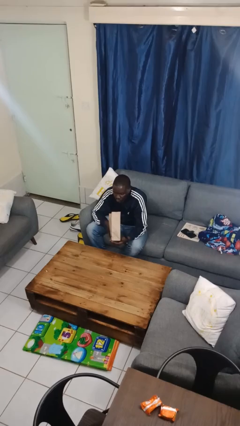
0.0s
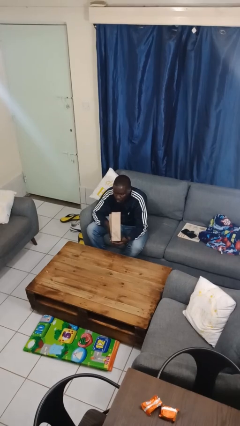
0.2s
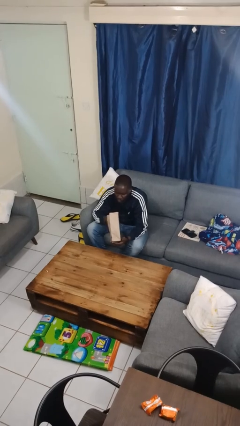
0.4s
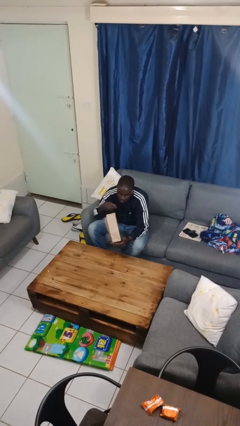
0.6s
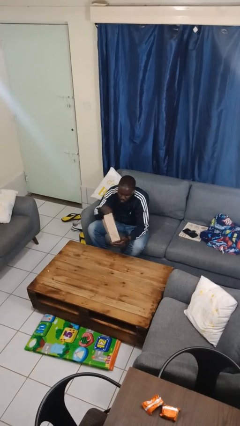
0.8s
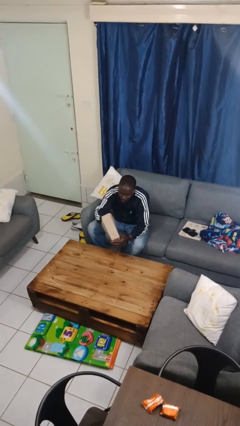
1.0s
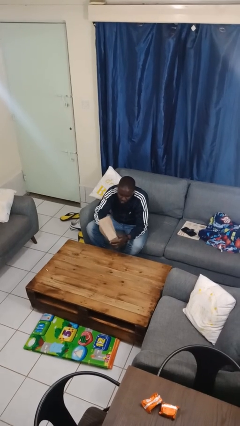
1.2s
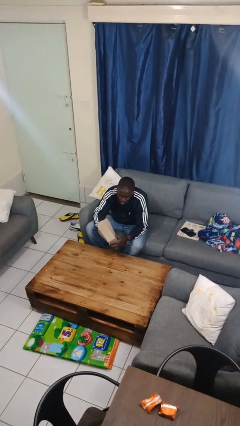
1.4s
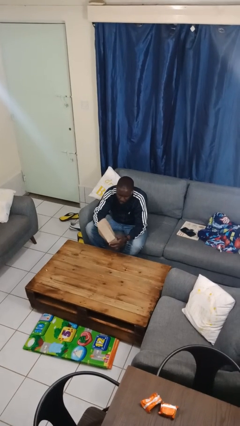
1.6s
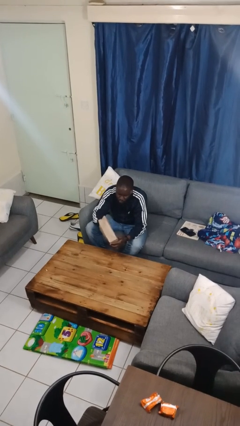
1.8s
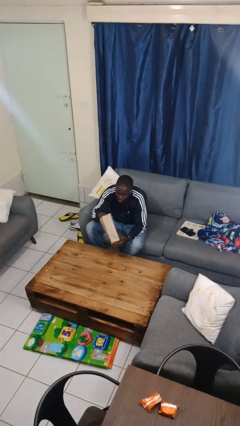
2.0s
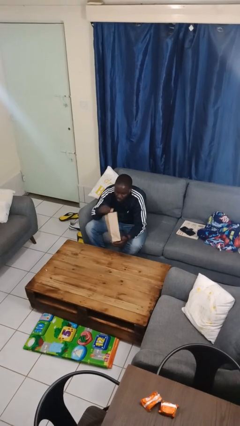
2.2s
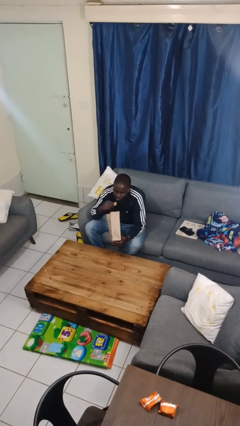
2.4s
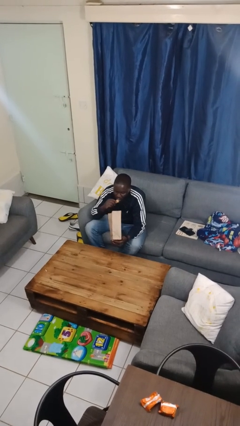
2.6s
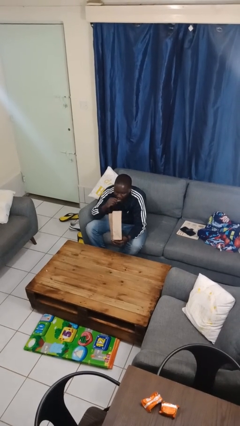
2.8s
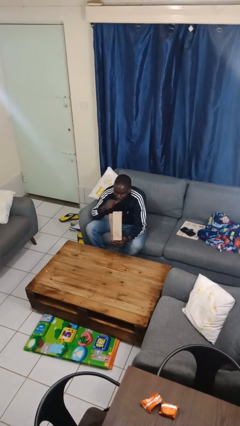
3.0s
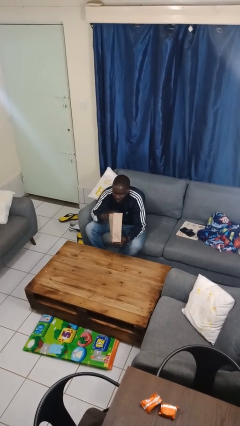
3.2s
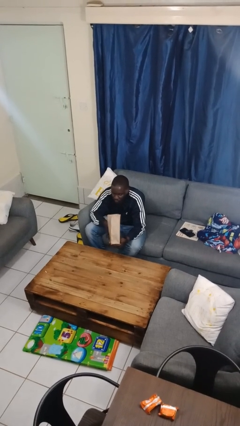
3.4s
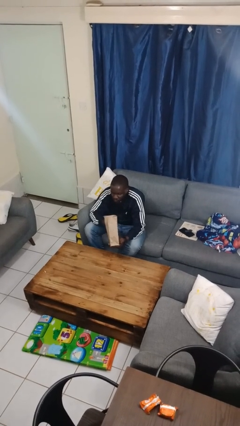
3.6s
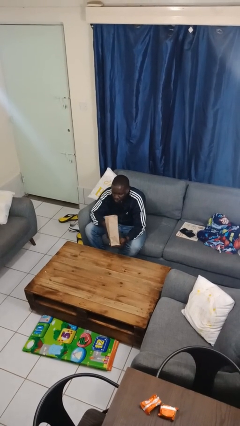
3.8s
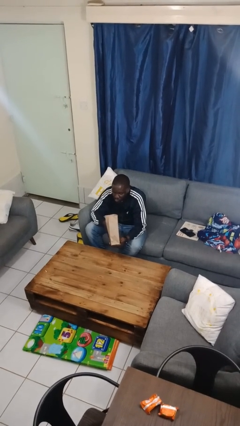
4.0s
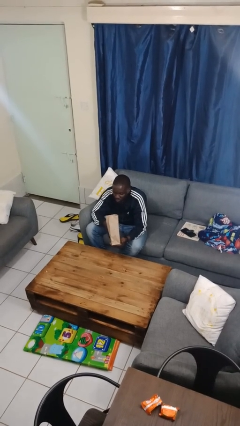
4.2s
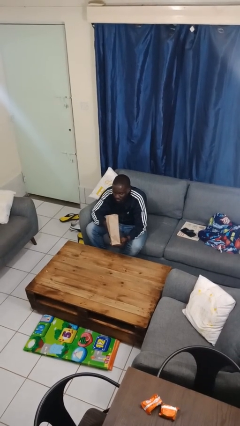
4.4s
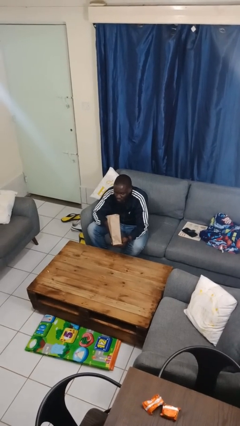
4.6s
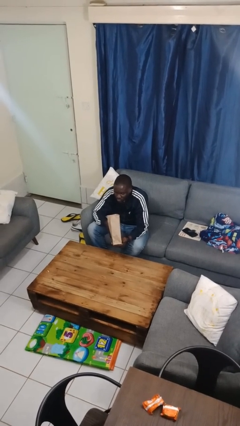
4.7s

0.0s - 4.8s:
person eats snack from bag

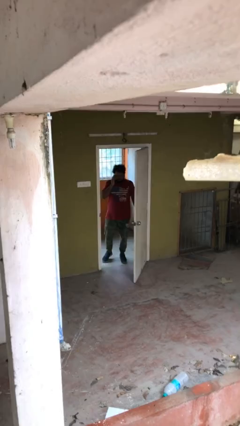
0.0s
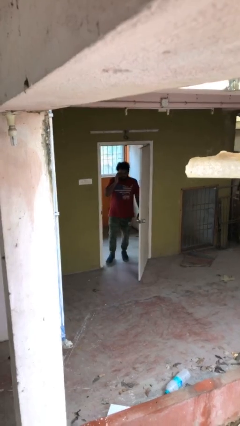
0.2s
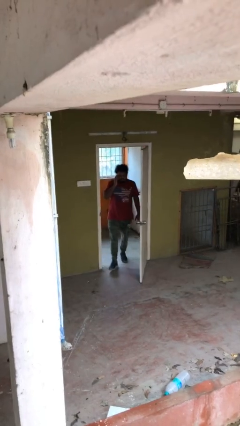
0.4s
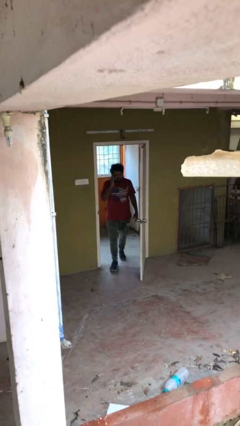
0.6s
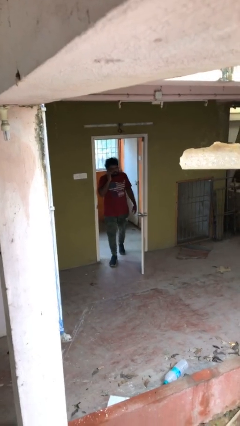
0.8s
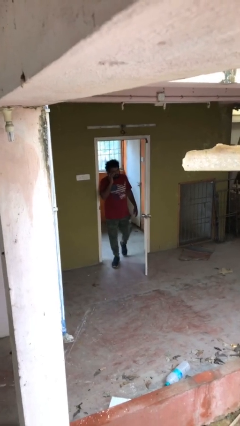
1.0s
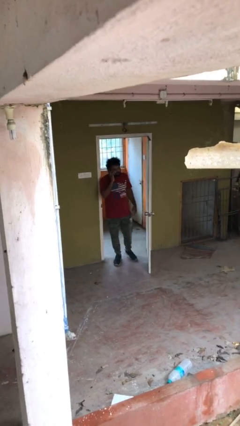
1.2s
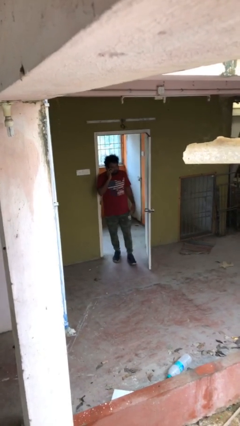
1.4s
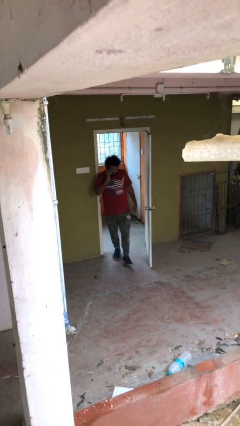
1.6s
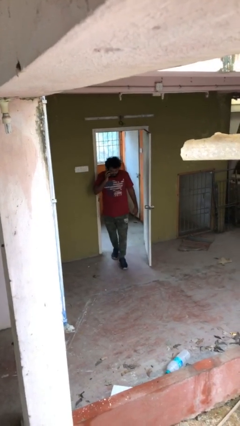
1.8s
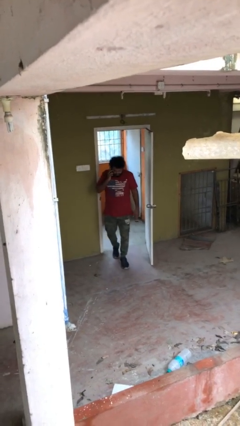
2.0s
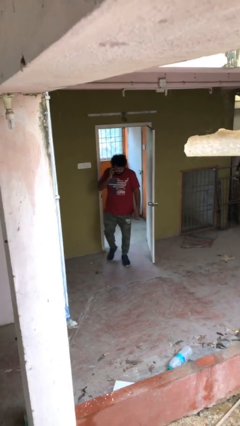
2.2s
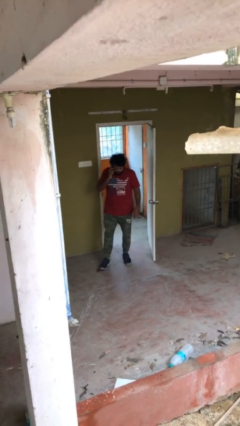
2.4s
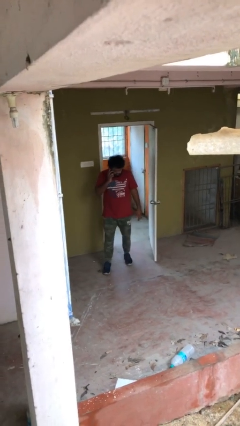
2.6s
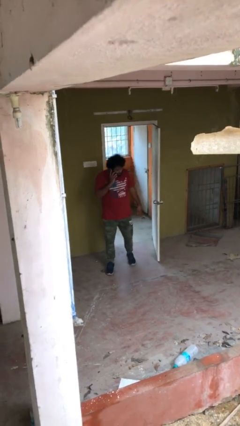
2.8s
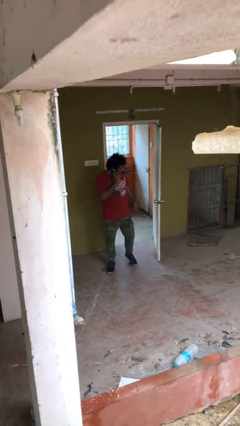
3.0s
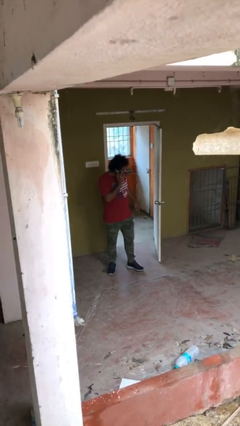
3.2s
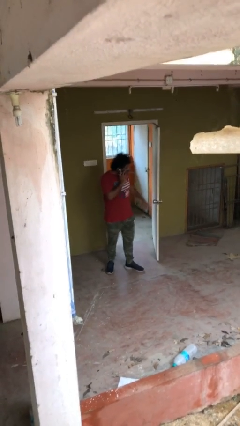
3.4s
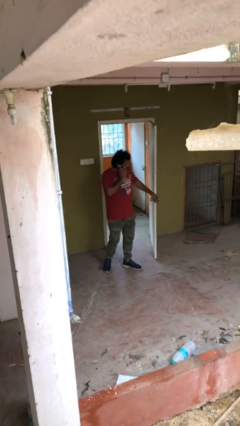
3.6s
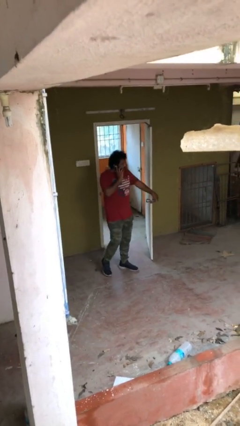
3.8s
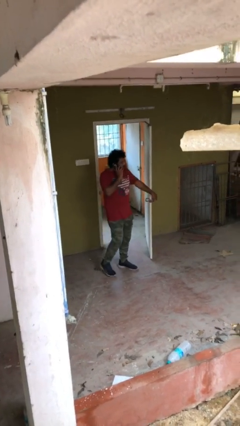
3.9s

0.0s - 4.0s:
person enters scene through structure

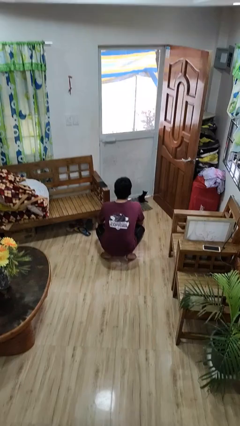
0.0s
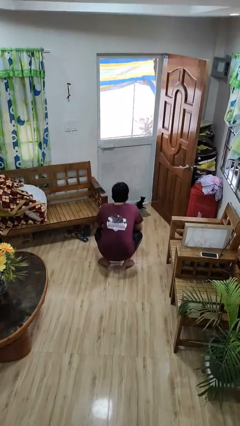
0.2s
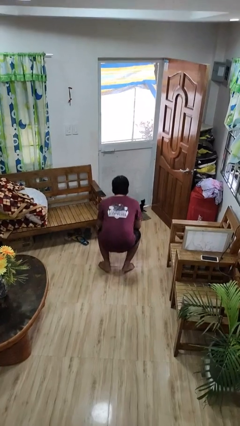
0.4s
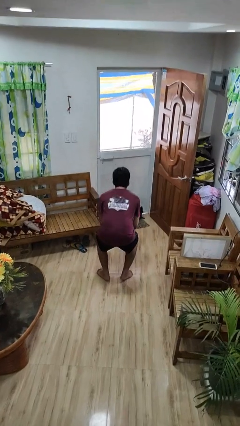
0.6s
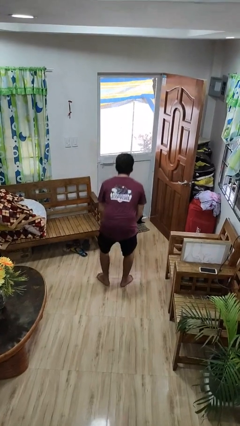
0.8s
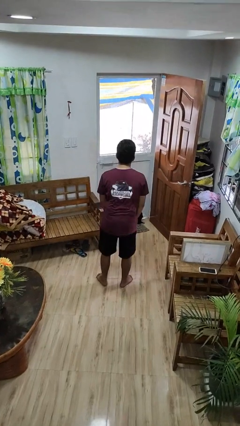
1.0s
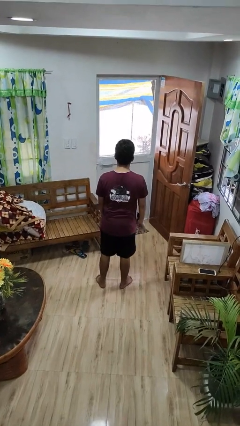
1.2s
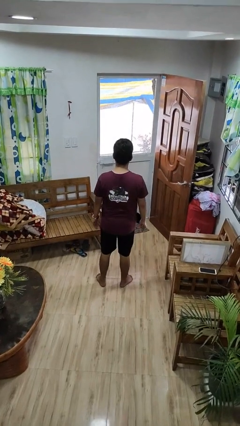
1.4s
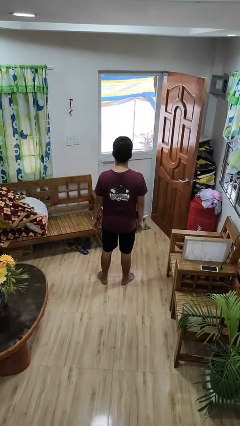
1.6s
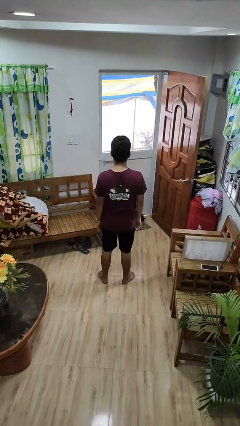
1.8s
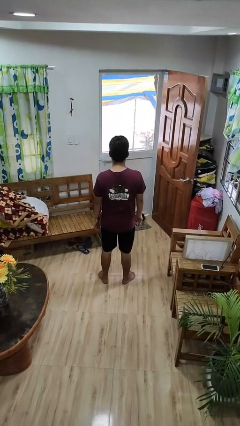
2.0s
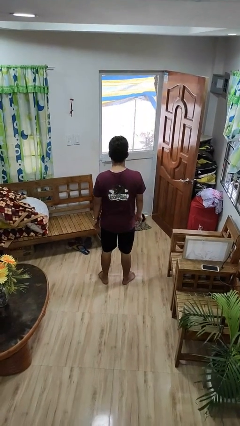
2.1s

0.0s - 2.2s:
person stands up

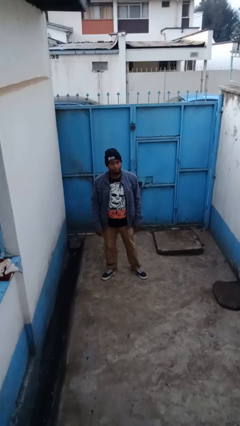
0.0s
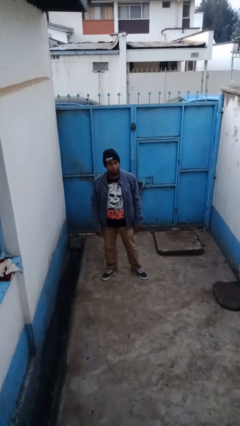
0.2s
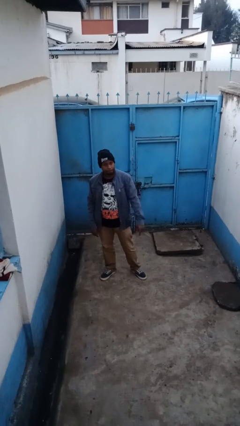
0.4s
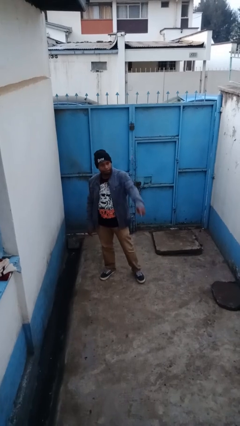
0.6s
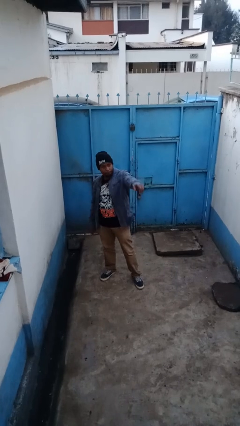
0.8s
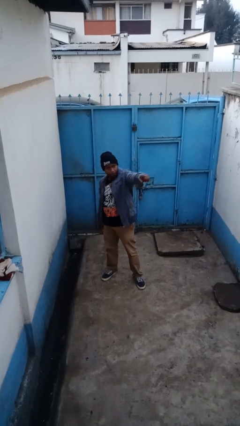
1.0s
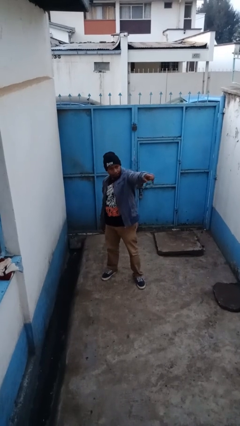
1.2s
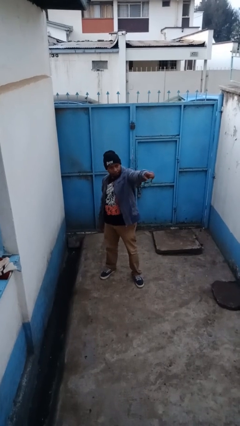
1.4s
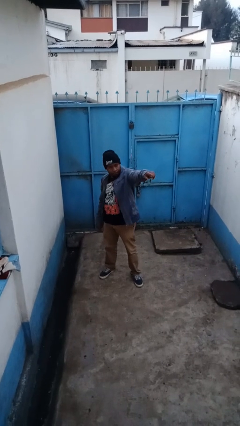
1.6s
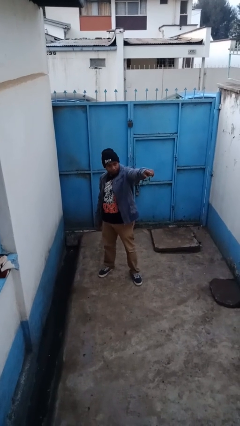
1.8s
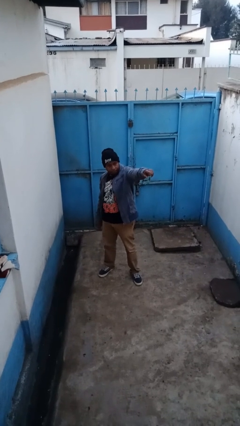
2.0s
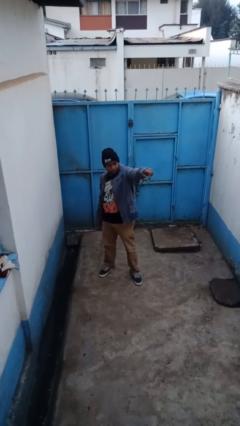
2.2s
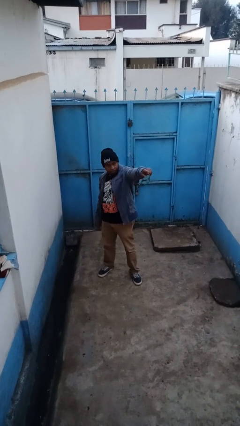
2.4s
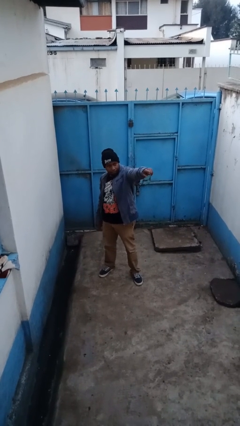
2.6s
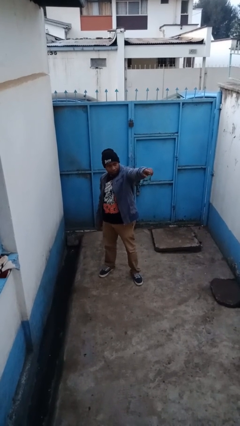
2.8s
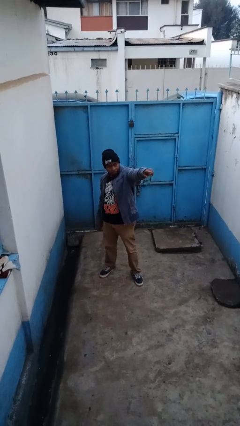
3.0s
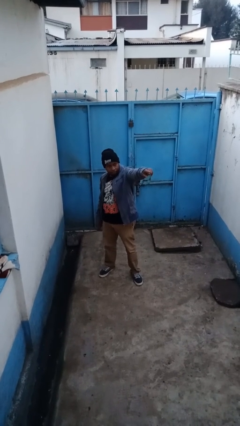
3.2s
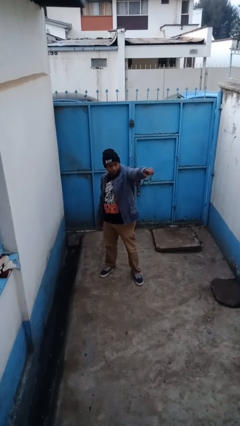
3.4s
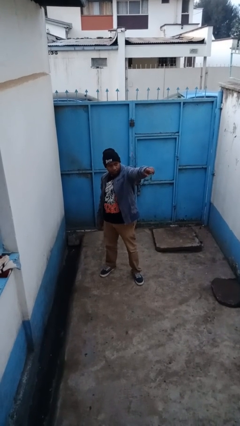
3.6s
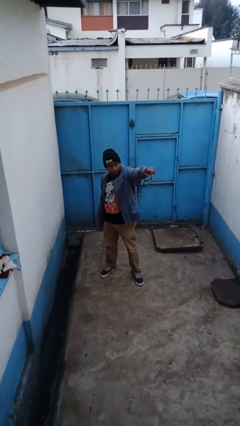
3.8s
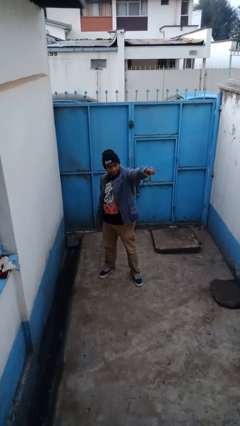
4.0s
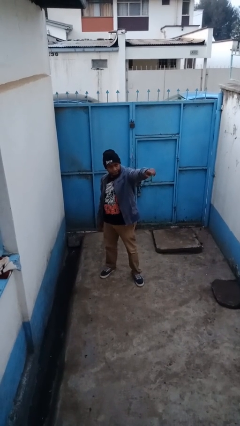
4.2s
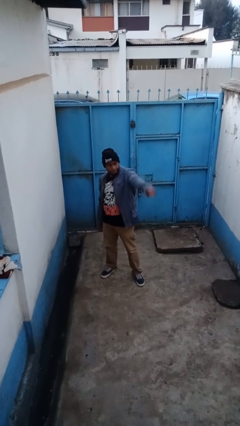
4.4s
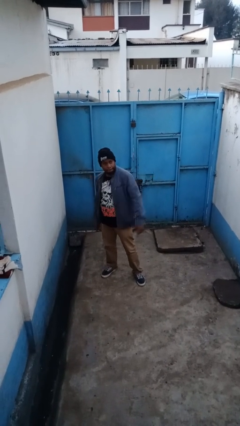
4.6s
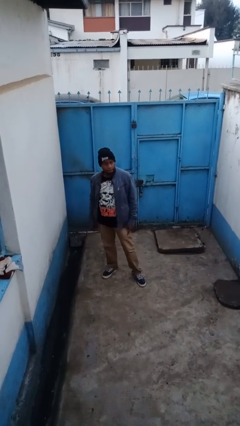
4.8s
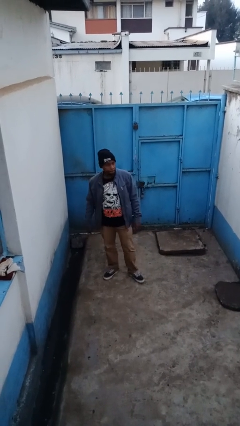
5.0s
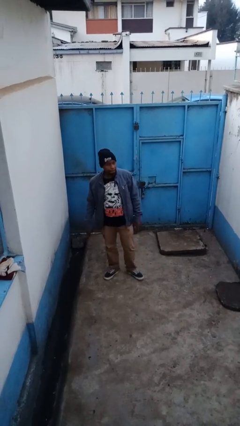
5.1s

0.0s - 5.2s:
person points at person

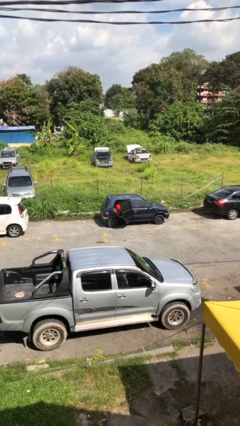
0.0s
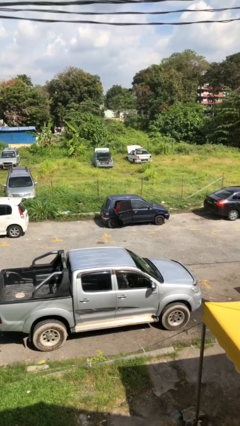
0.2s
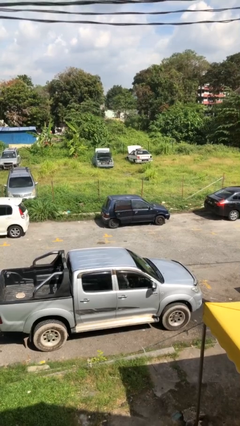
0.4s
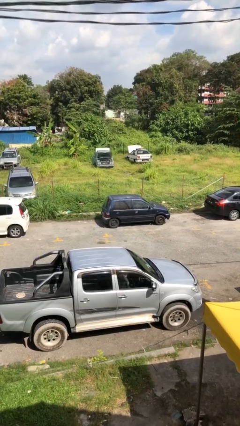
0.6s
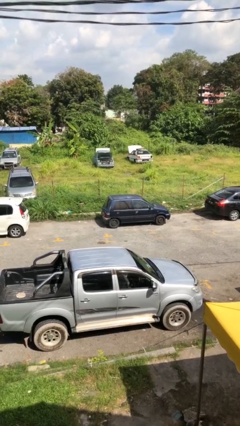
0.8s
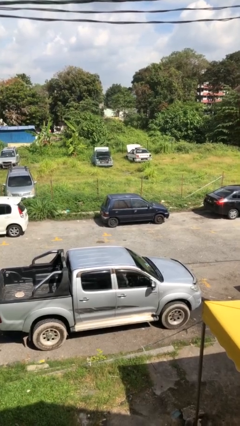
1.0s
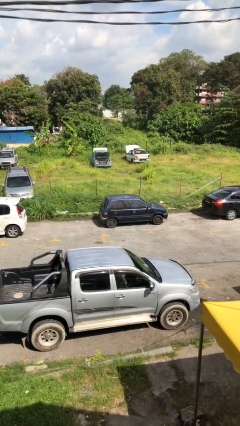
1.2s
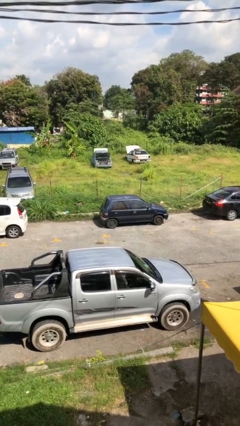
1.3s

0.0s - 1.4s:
person closes car door

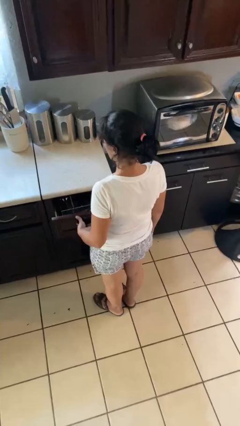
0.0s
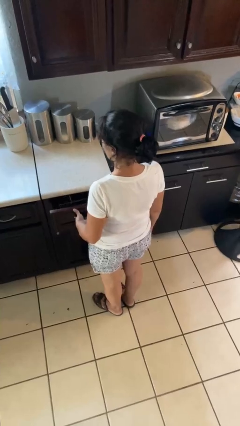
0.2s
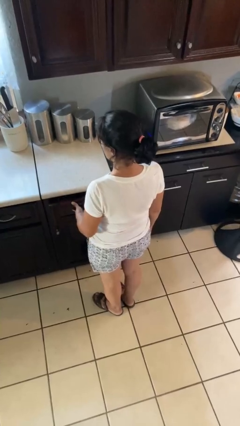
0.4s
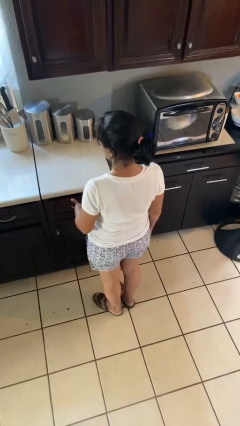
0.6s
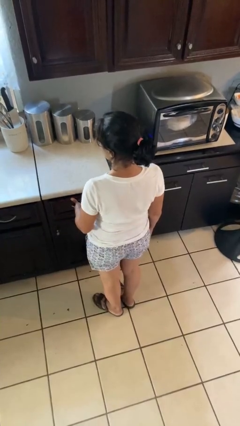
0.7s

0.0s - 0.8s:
person closes kitchen drawer
